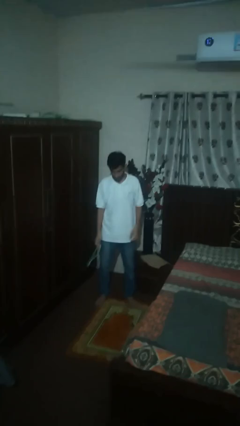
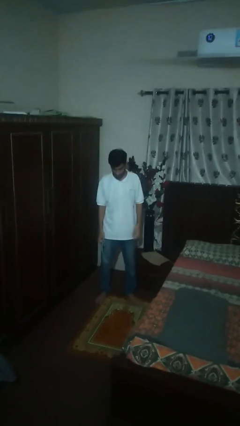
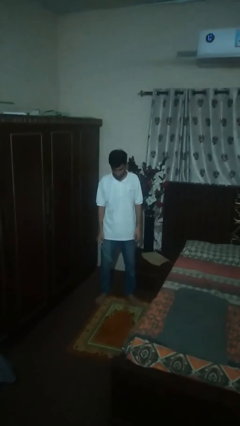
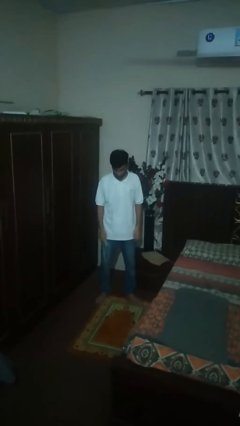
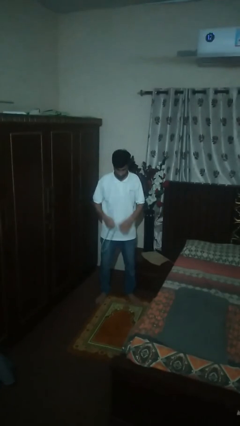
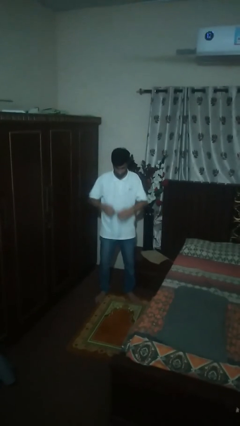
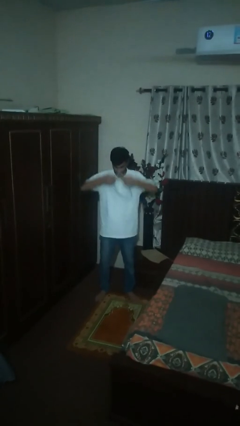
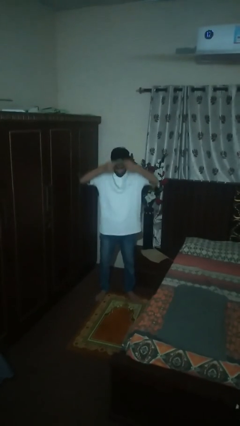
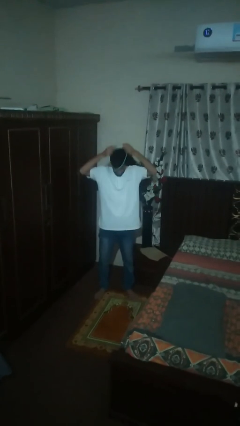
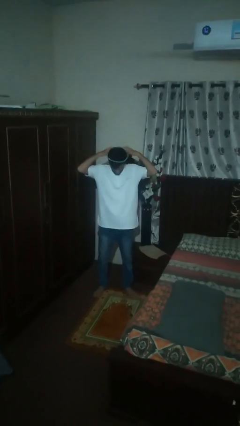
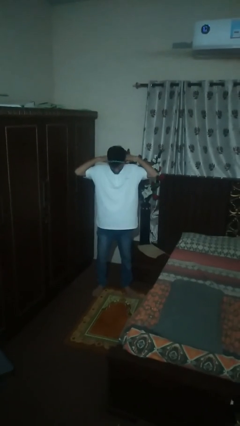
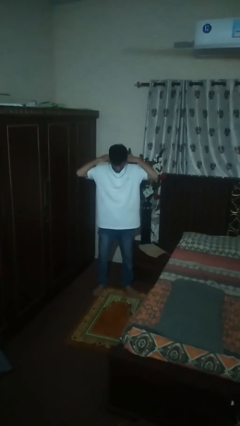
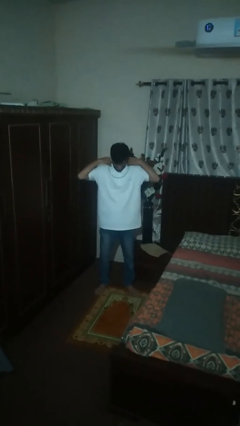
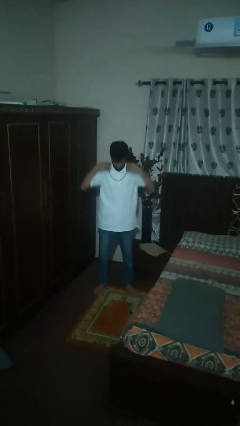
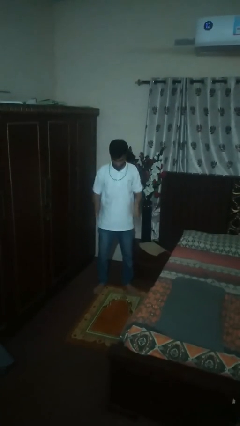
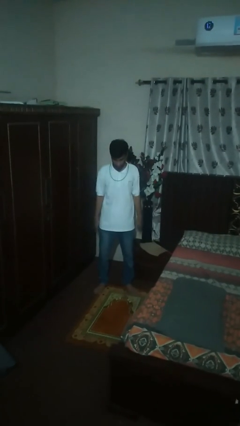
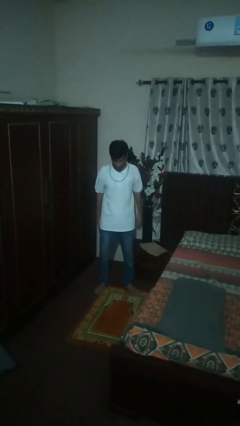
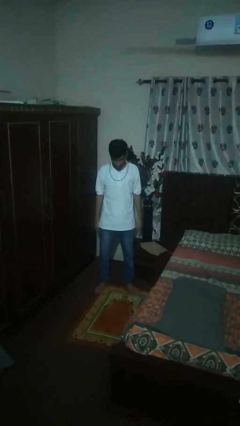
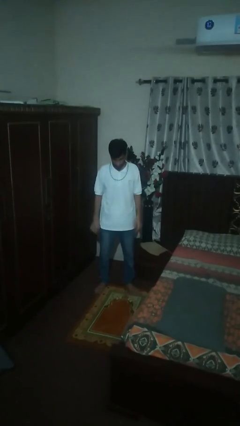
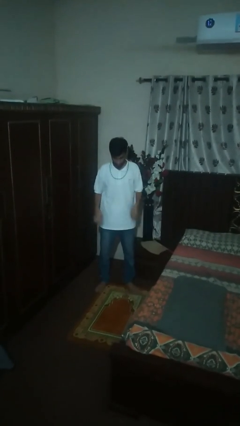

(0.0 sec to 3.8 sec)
person puts on necklace

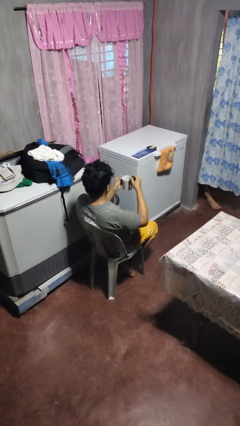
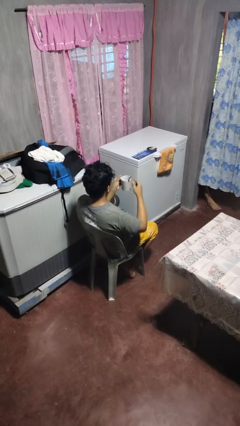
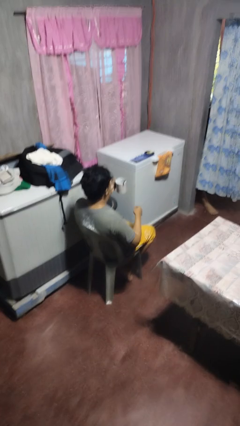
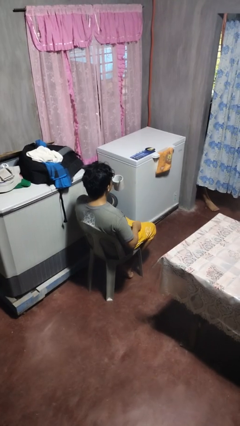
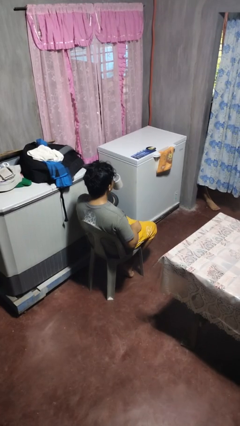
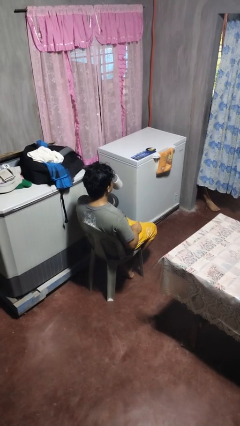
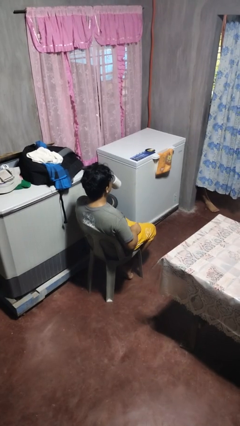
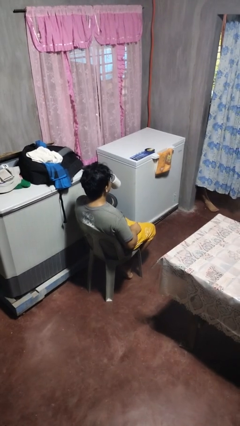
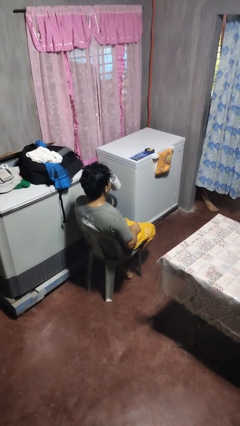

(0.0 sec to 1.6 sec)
person drinks from mug

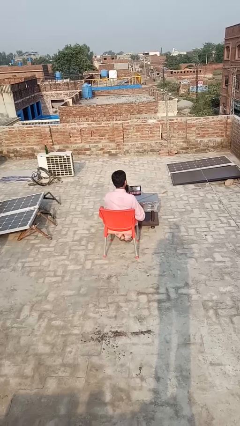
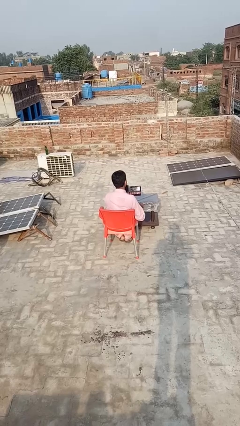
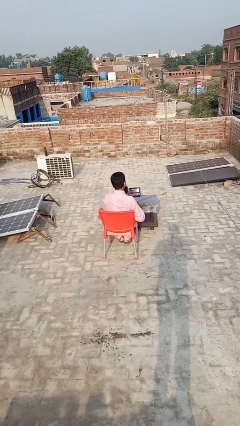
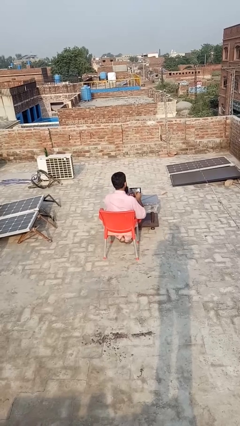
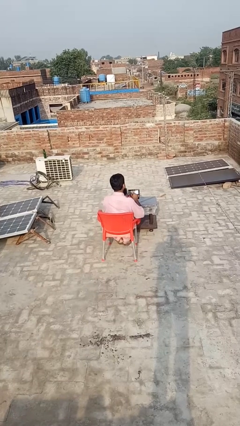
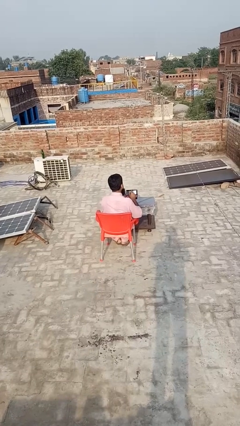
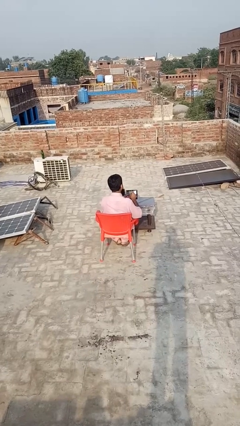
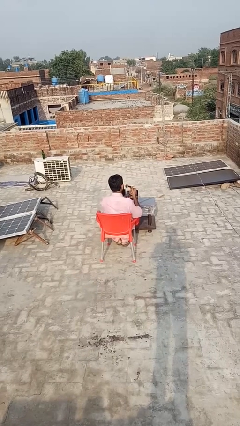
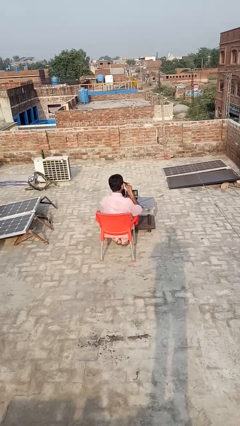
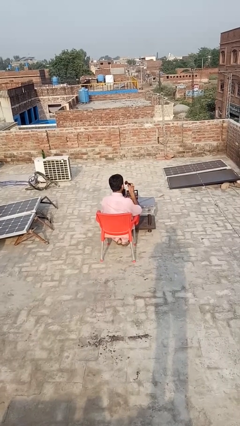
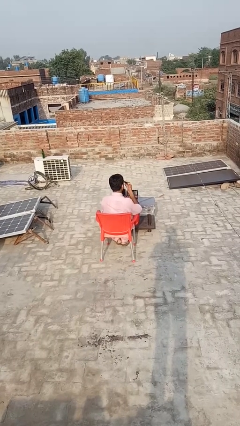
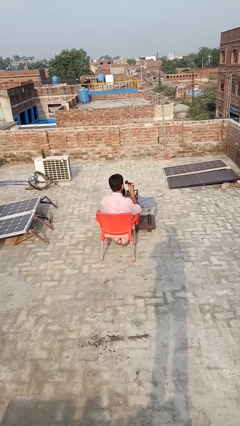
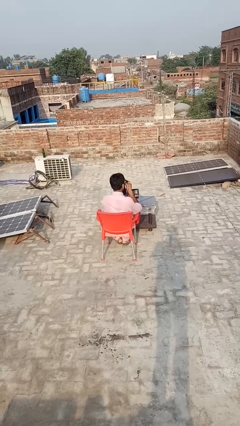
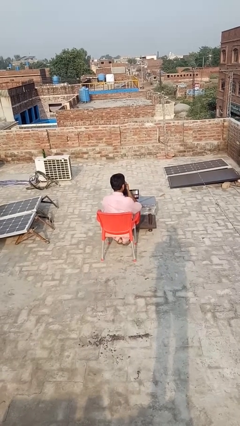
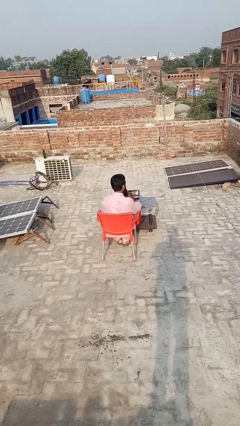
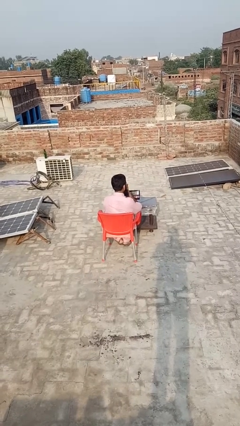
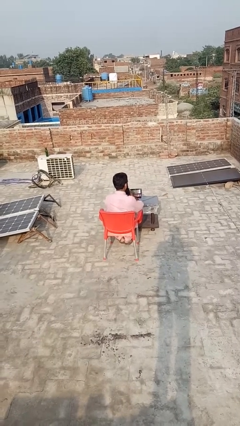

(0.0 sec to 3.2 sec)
person applies eye makeup

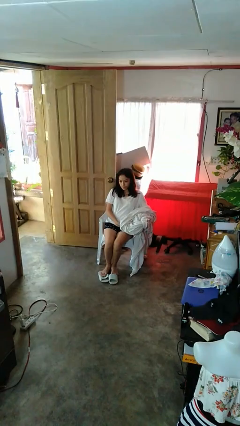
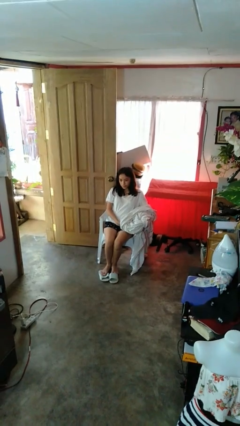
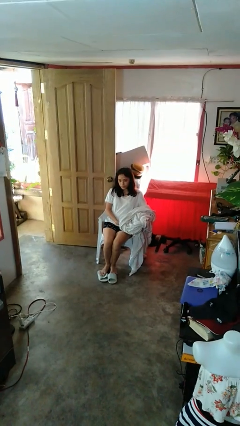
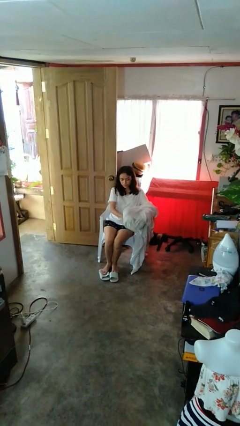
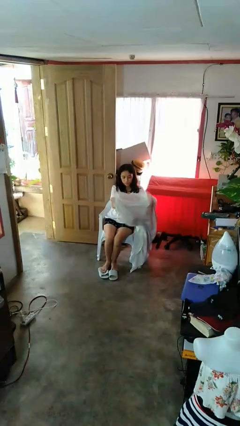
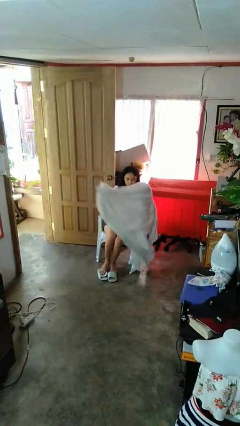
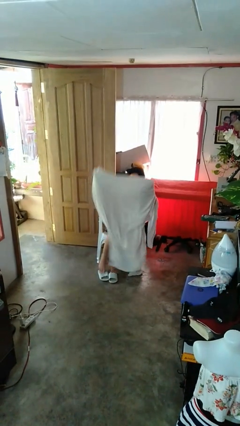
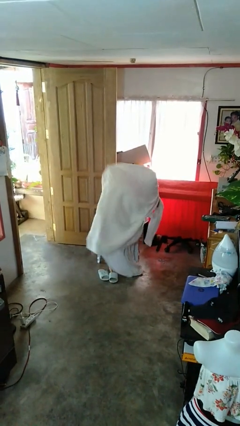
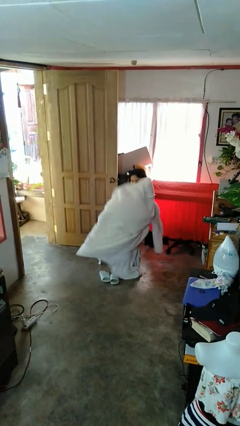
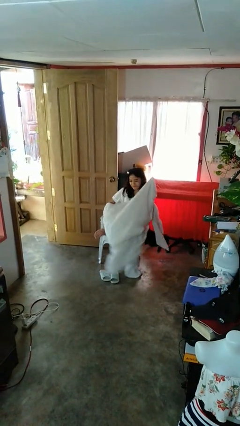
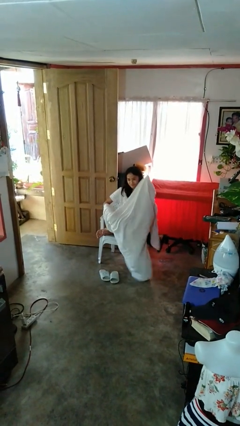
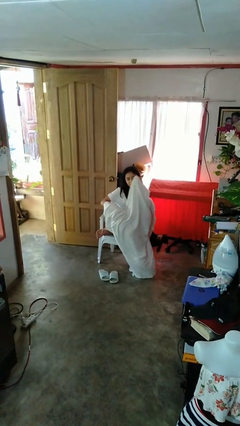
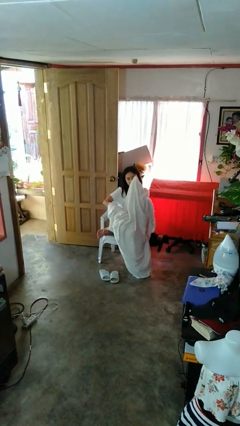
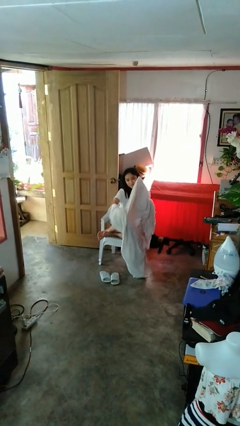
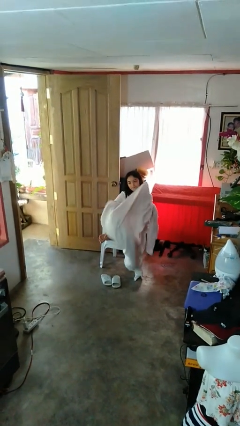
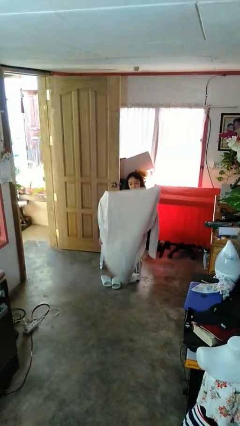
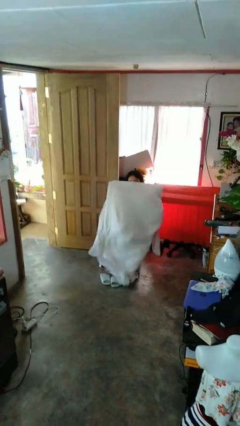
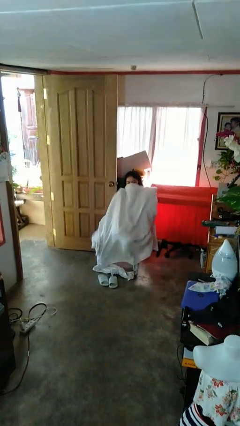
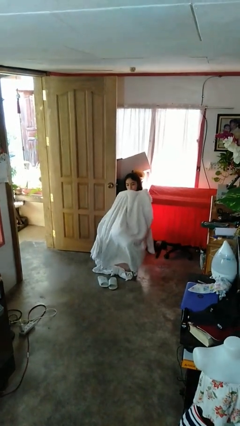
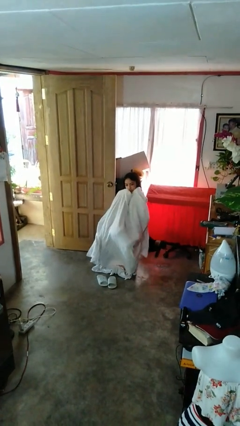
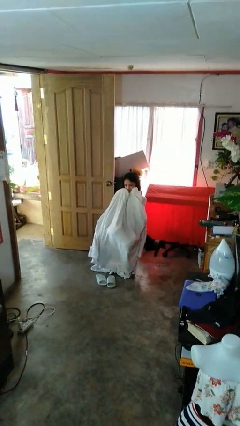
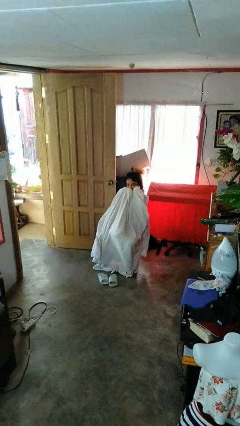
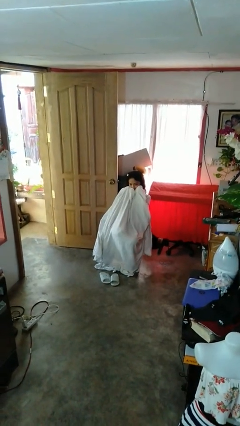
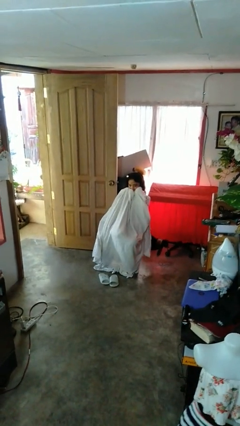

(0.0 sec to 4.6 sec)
person covers with blanket

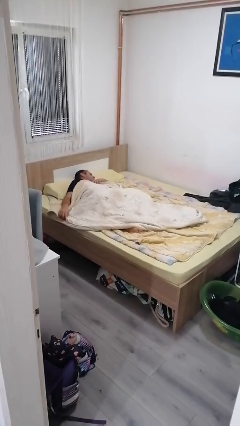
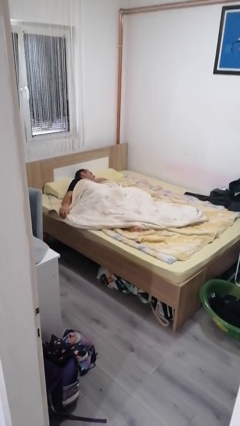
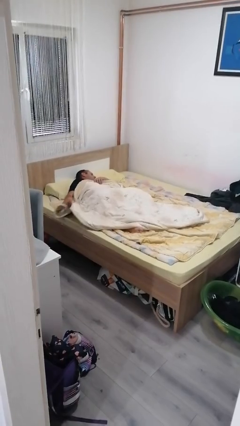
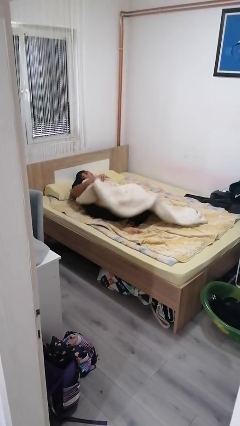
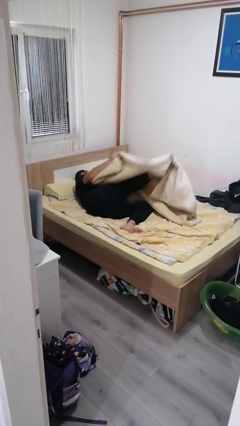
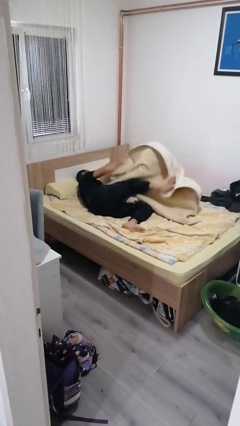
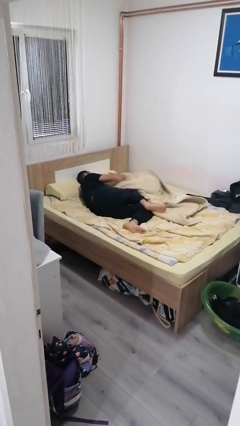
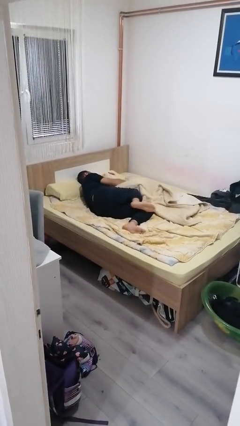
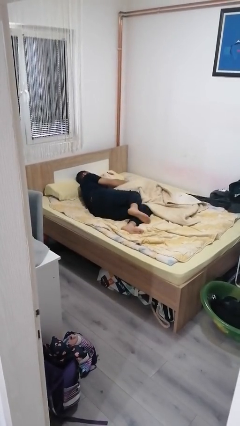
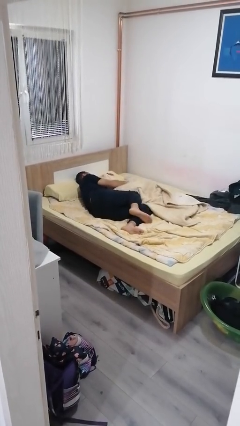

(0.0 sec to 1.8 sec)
person uncovers with bedsheets

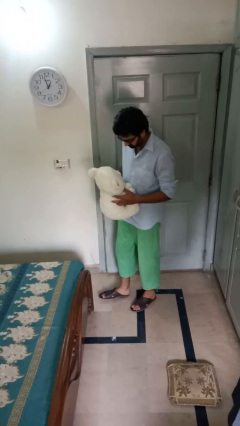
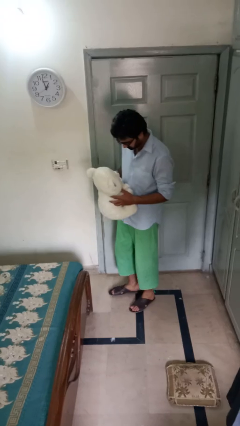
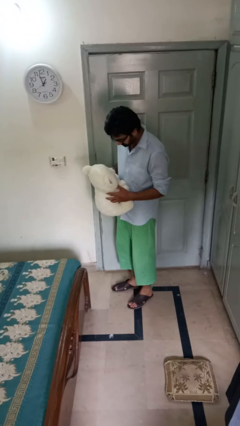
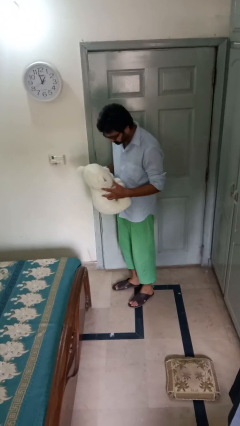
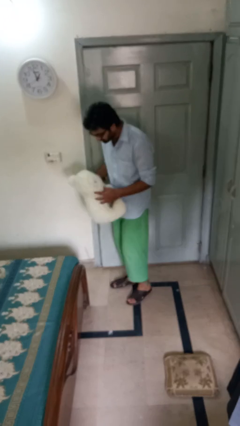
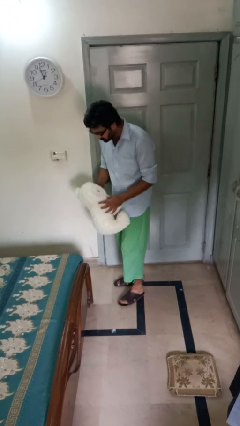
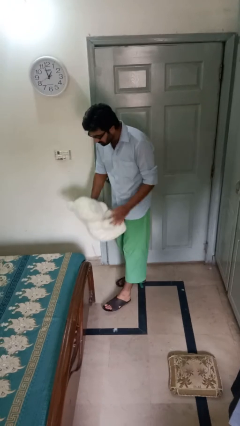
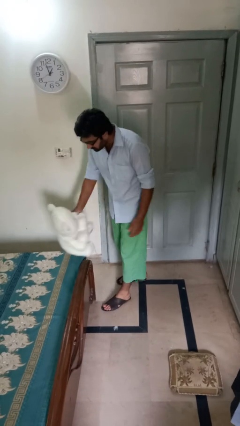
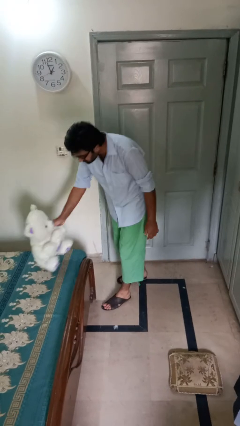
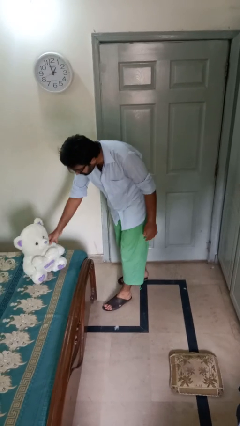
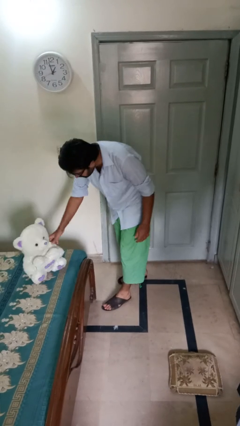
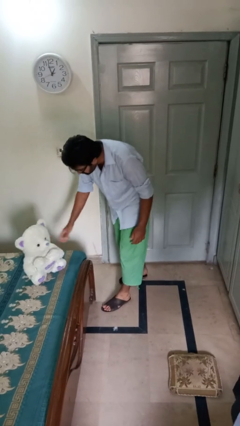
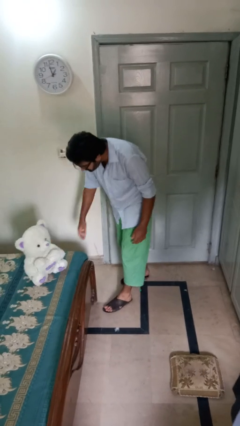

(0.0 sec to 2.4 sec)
person puts down object on bed
